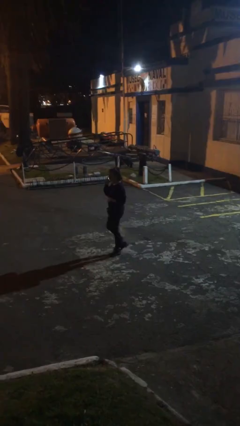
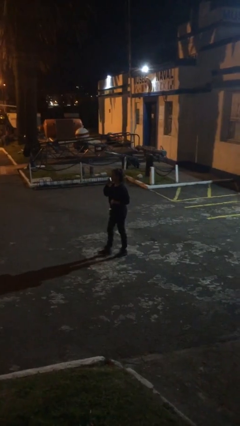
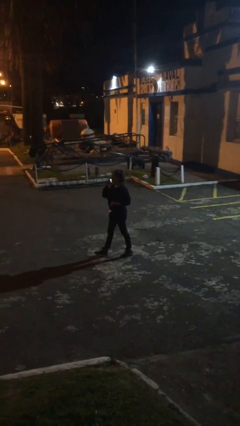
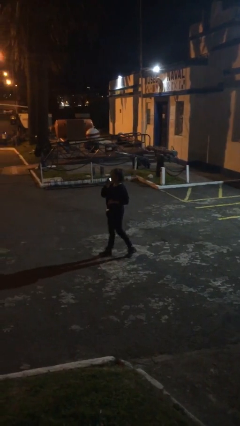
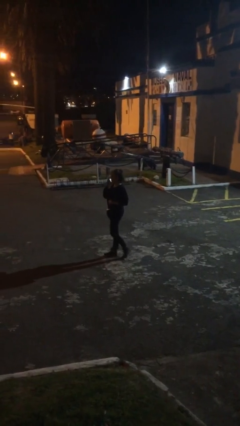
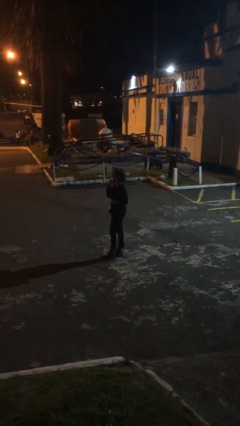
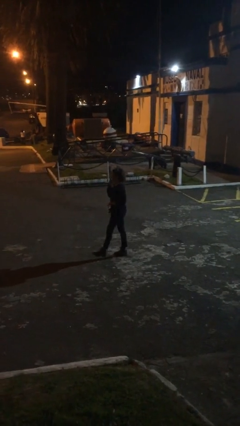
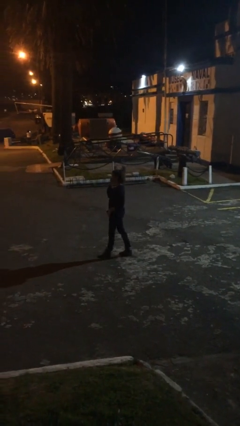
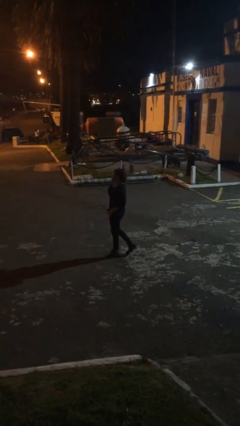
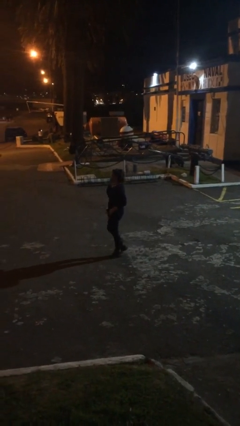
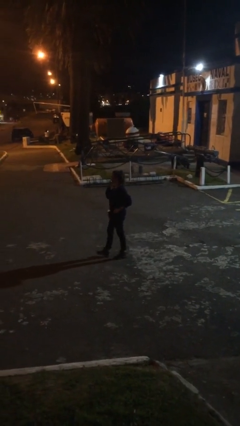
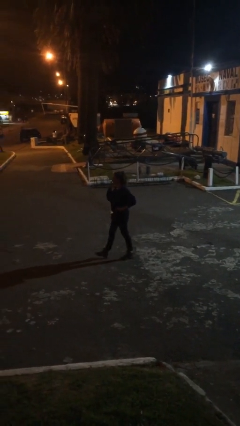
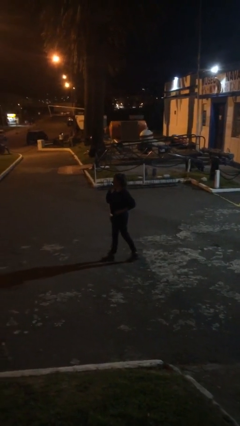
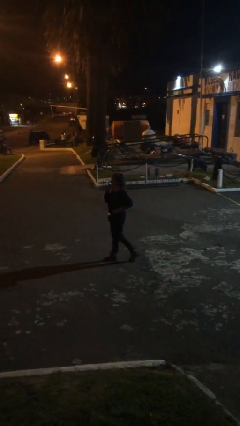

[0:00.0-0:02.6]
person talks on phone

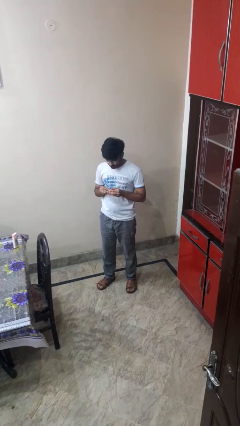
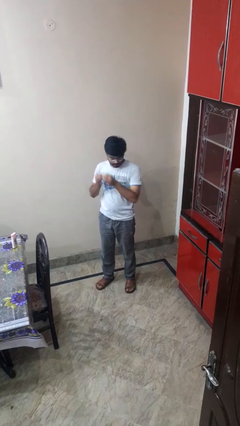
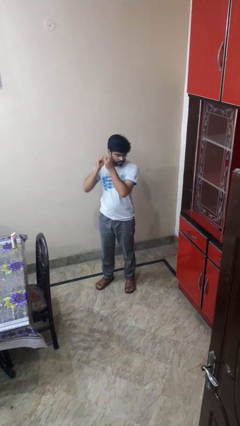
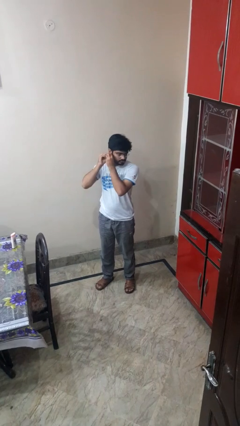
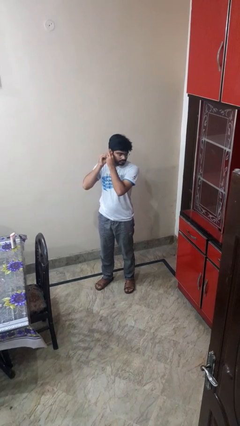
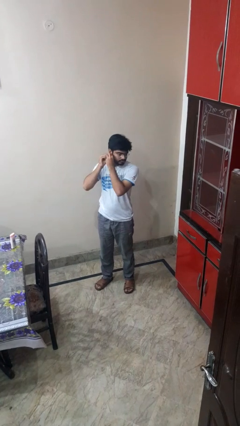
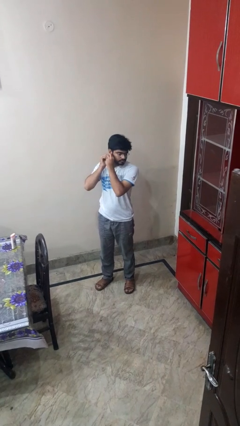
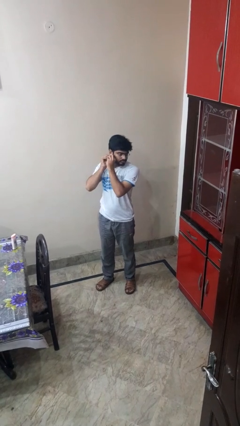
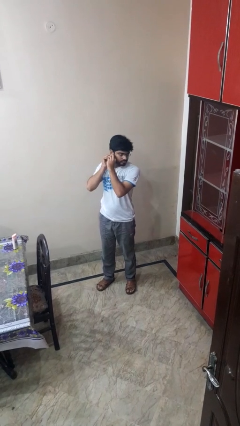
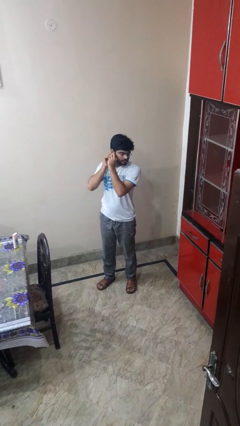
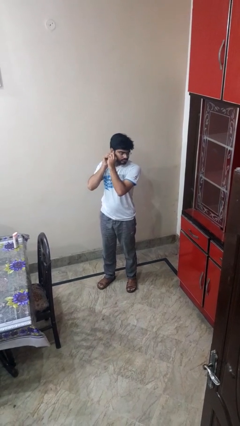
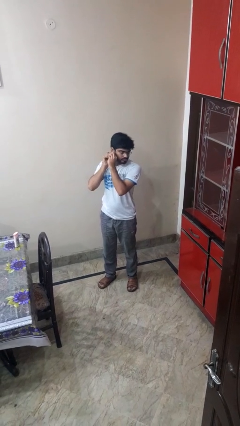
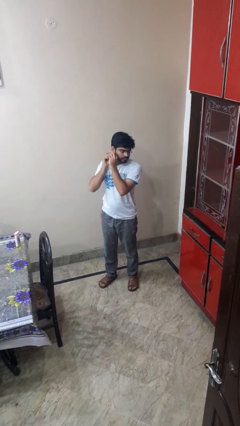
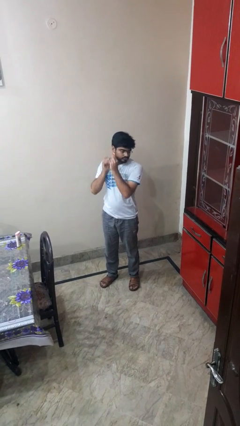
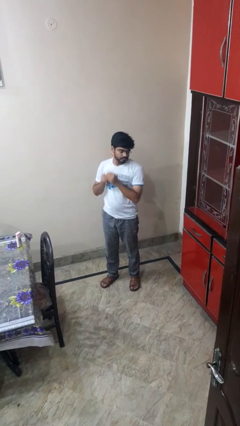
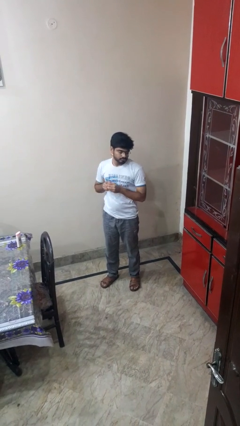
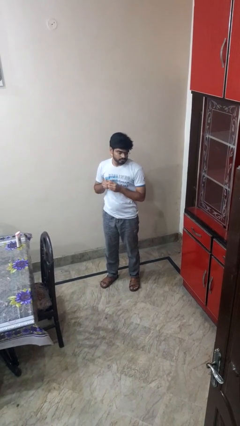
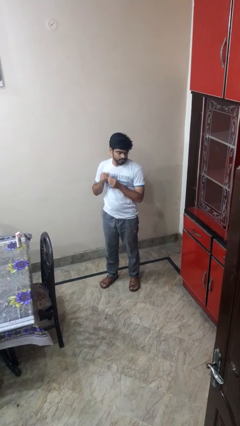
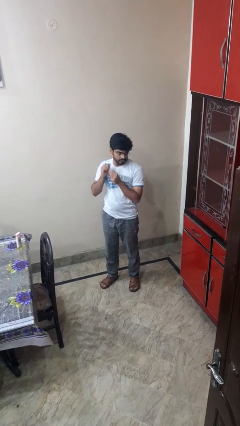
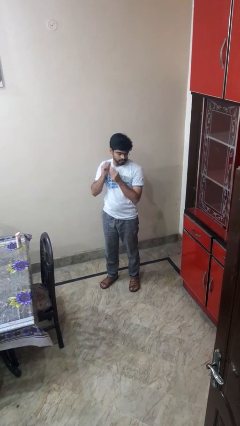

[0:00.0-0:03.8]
person puts on earrings

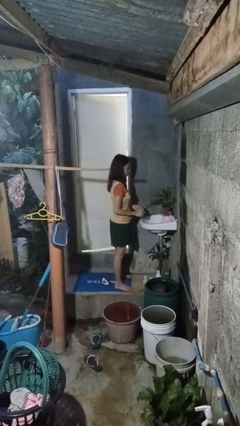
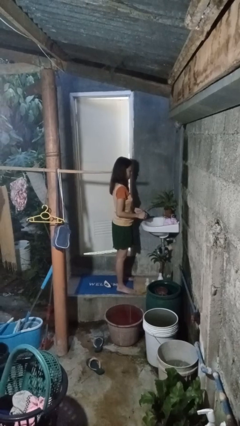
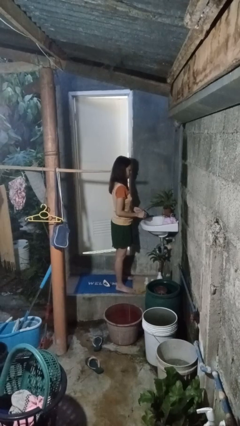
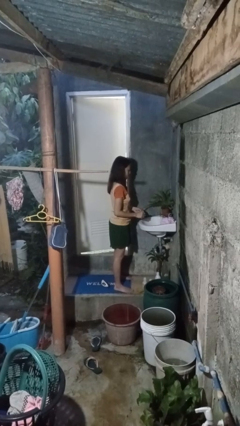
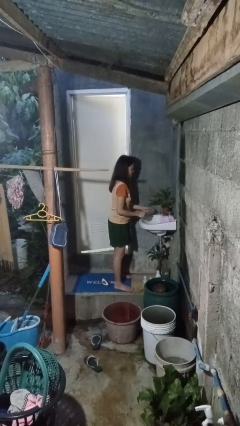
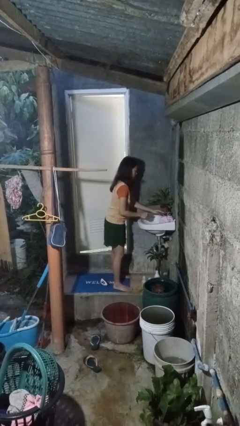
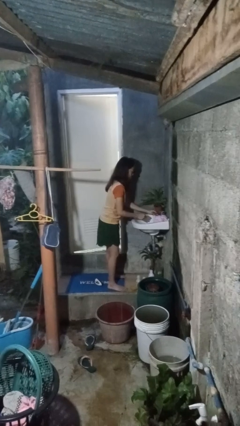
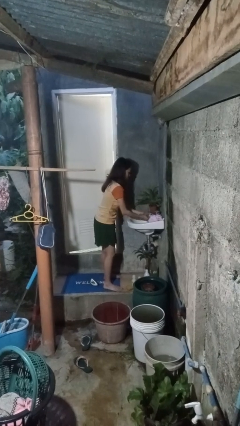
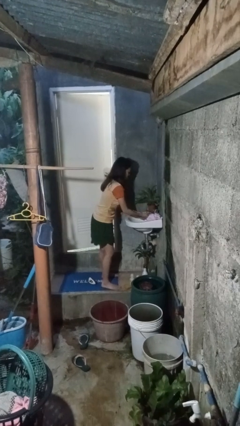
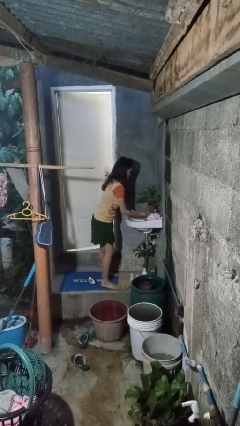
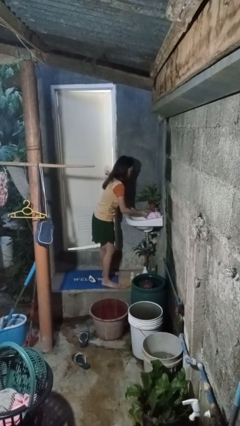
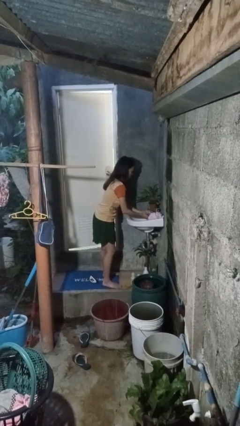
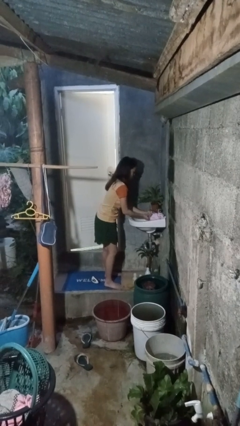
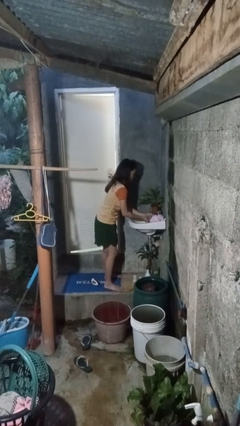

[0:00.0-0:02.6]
person washes hands

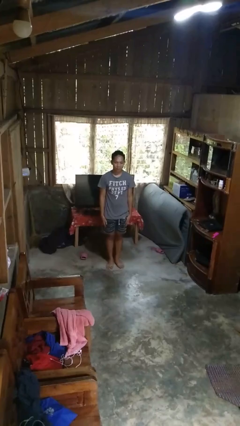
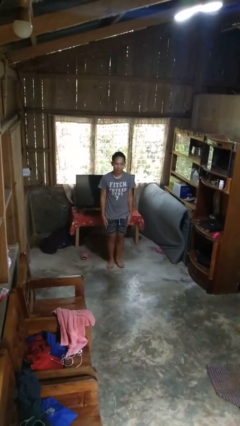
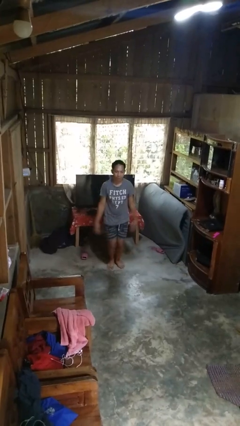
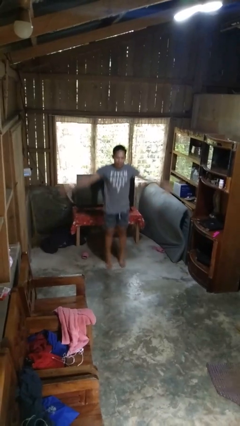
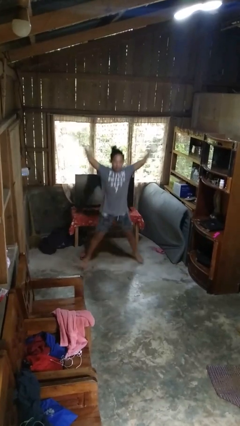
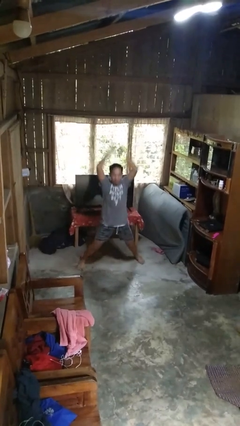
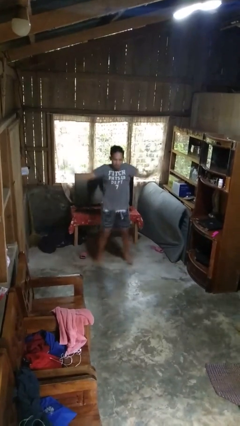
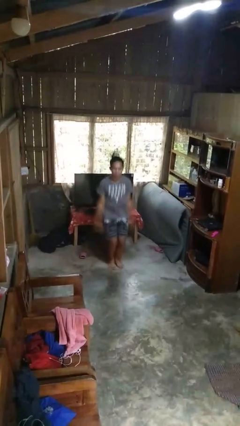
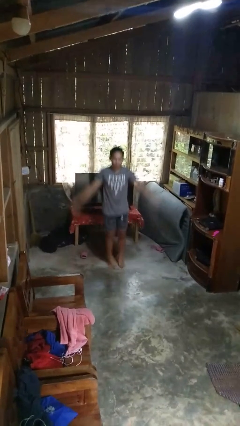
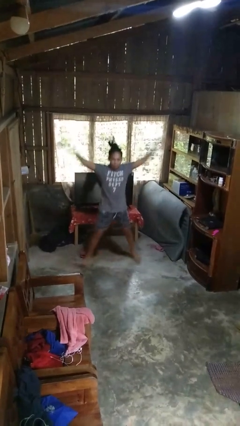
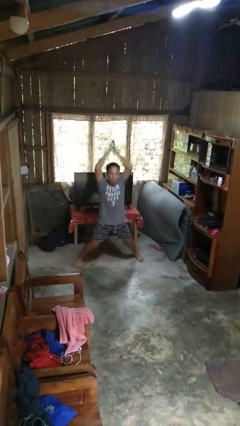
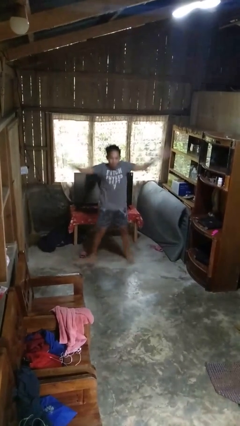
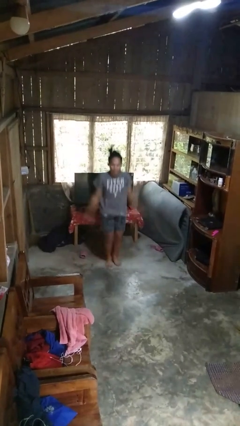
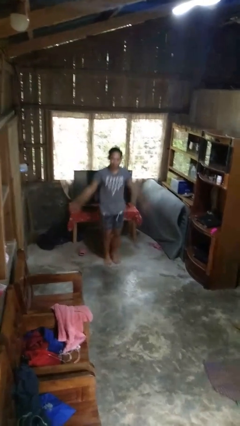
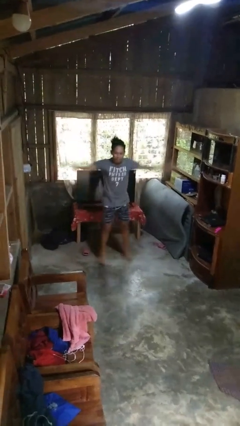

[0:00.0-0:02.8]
person exercises with jumping jacks

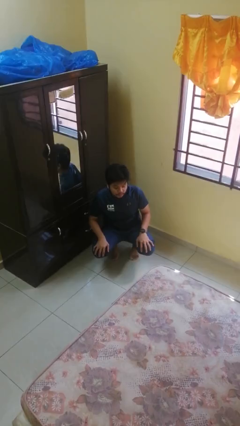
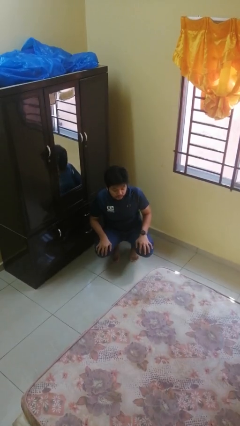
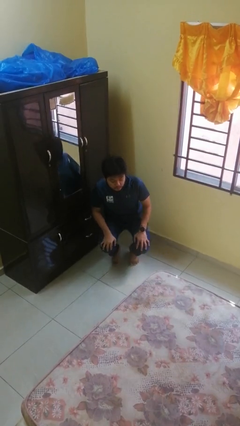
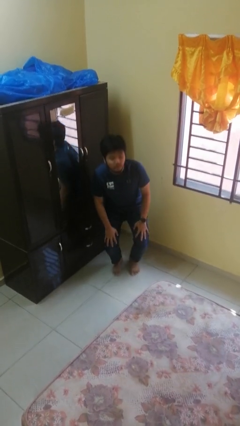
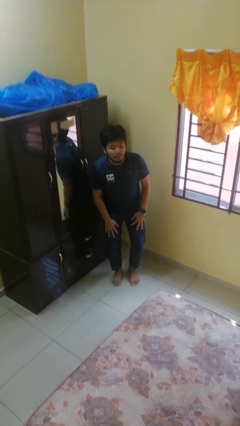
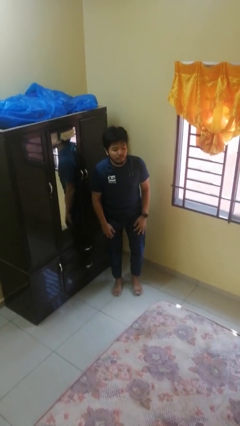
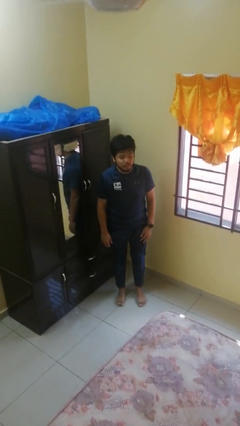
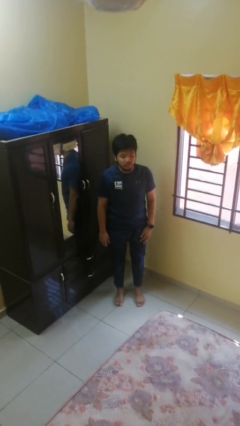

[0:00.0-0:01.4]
person stands up

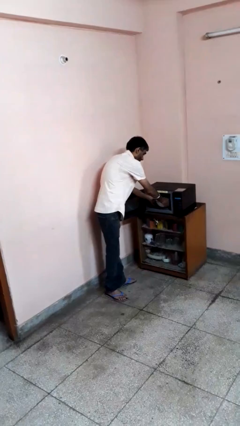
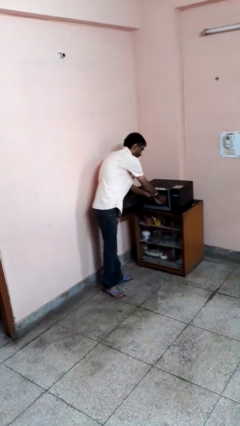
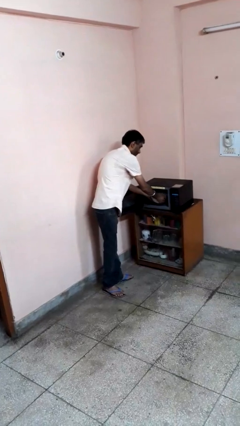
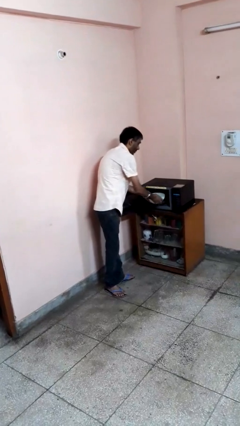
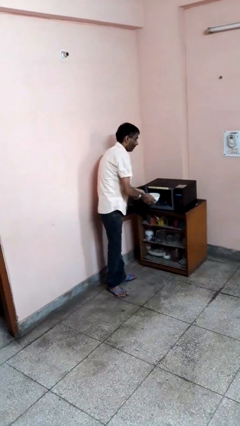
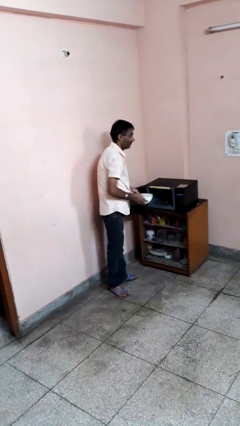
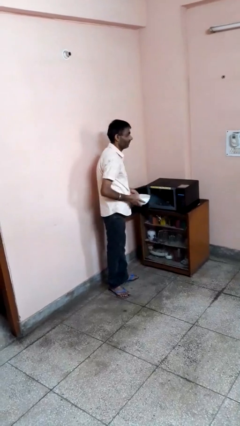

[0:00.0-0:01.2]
person takes object from microwave

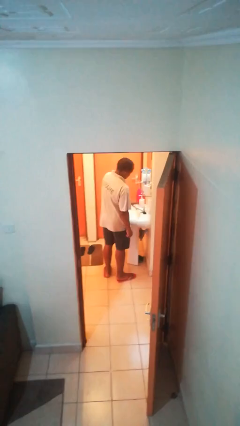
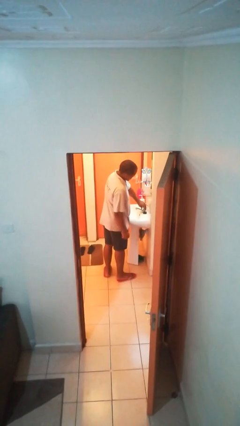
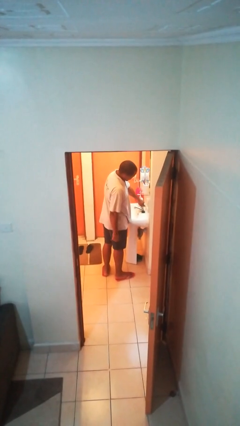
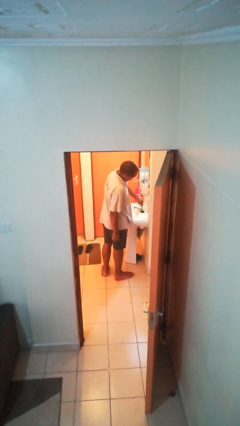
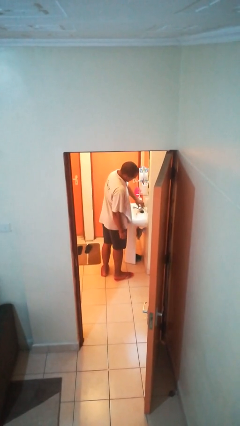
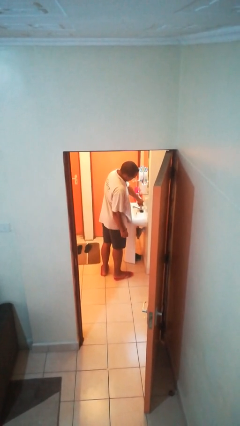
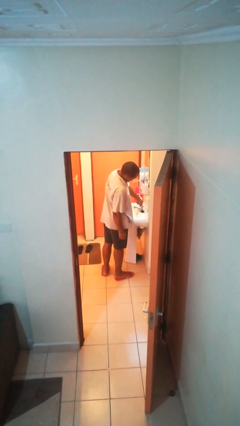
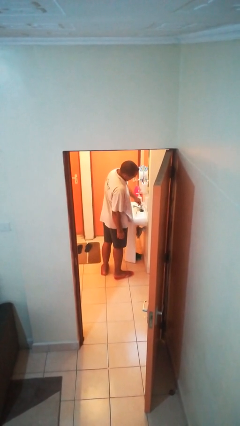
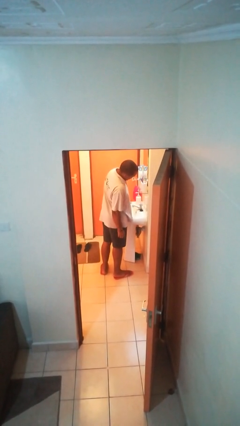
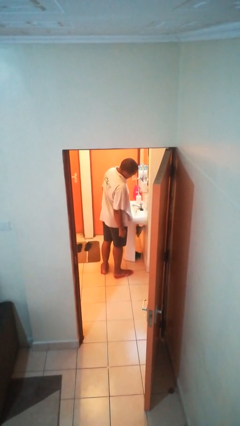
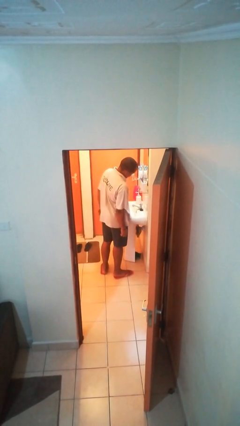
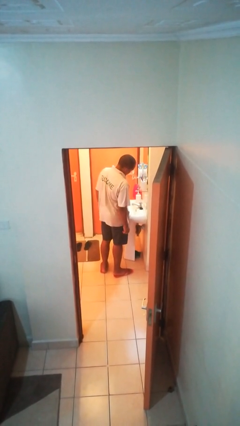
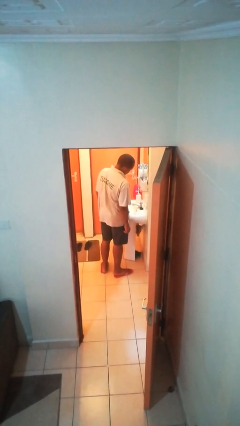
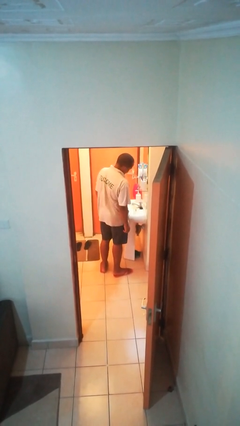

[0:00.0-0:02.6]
person turns on faucet

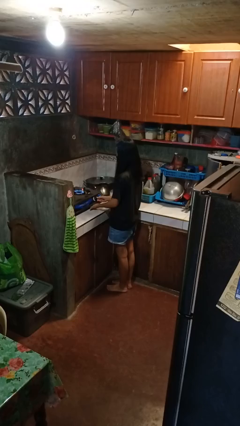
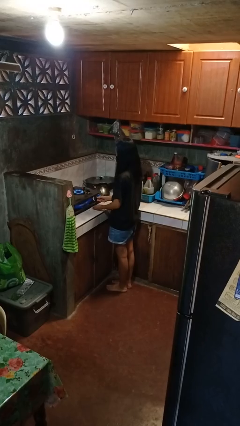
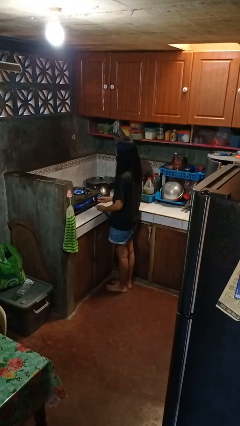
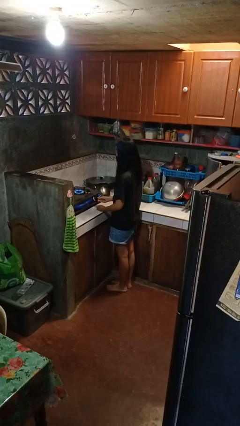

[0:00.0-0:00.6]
person turns on stovetop
